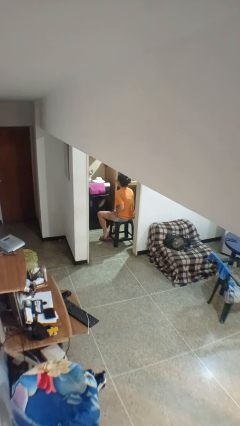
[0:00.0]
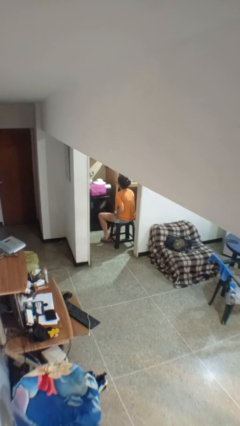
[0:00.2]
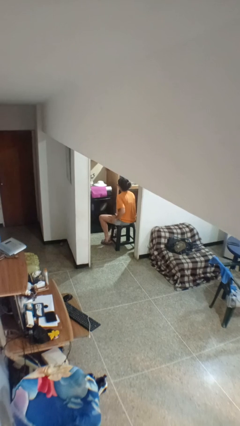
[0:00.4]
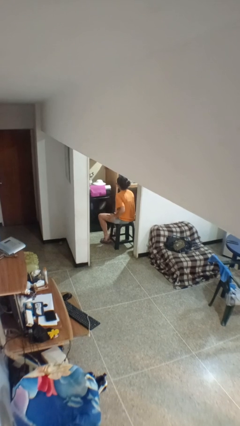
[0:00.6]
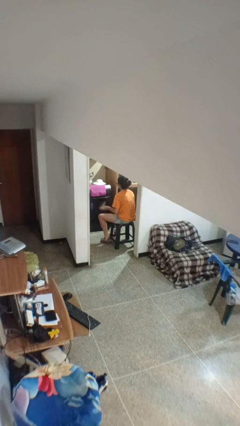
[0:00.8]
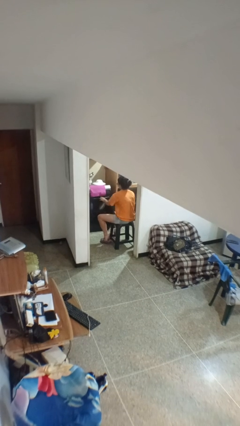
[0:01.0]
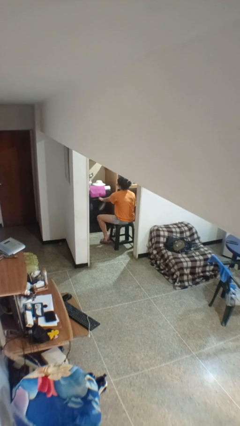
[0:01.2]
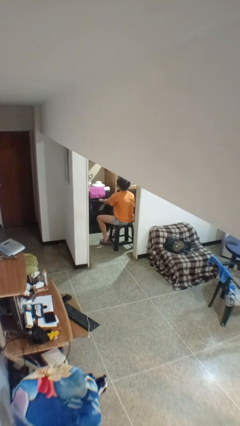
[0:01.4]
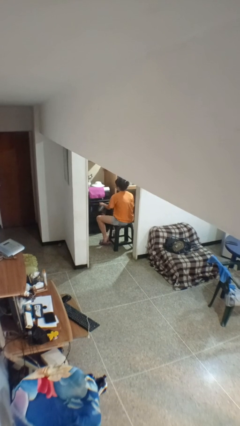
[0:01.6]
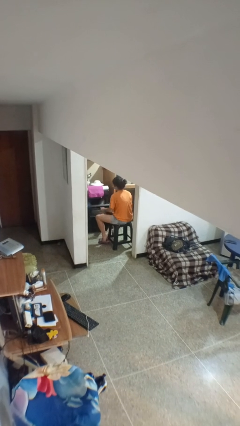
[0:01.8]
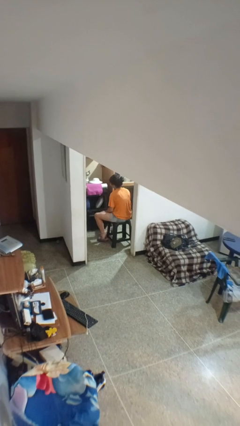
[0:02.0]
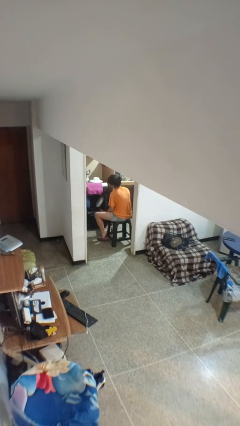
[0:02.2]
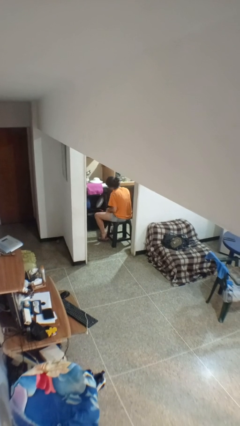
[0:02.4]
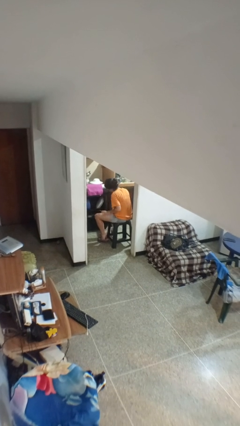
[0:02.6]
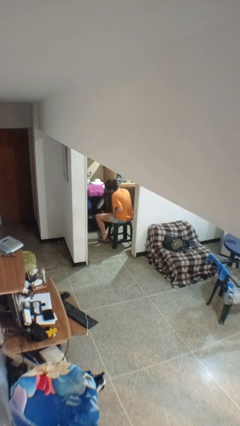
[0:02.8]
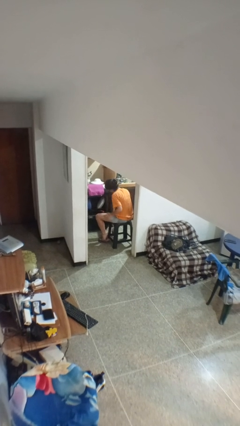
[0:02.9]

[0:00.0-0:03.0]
person opens dishwasher

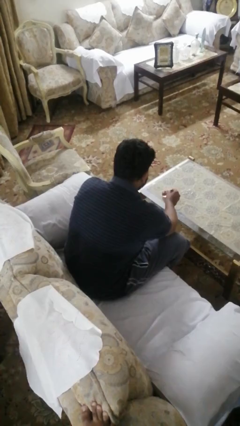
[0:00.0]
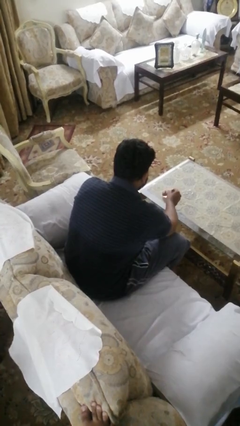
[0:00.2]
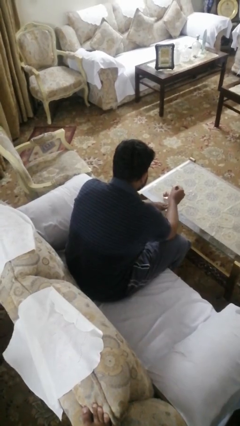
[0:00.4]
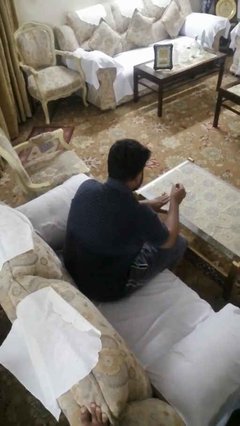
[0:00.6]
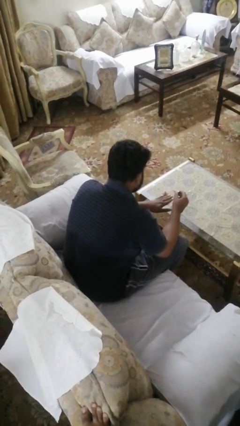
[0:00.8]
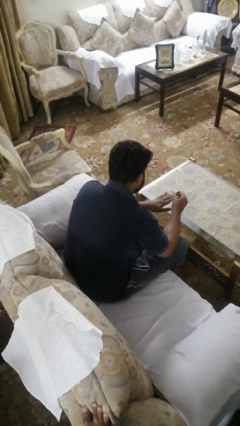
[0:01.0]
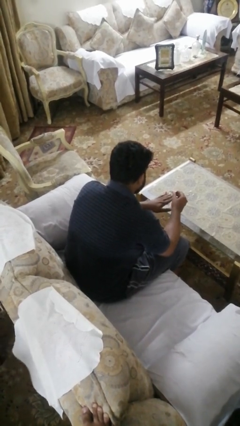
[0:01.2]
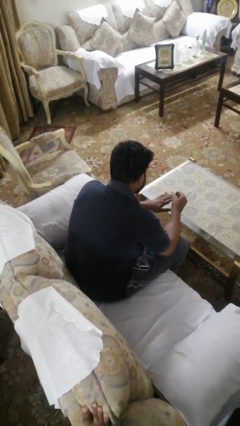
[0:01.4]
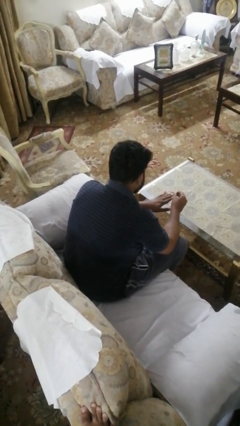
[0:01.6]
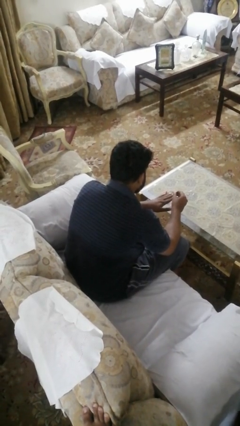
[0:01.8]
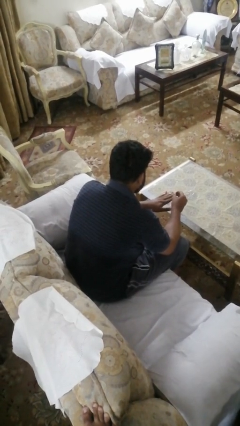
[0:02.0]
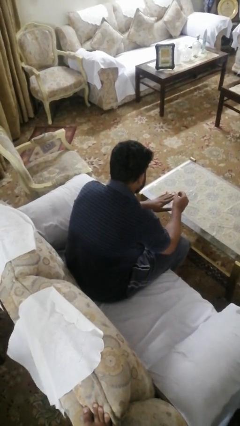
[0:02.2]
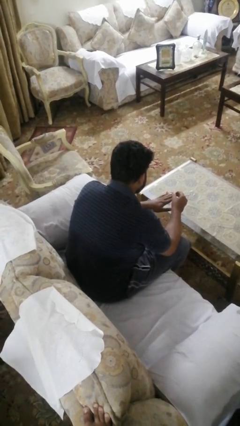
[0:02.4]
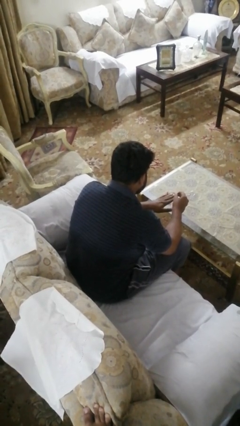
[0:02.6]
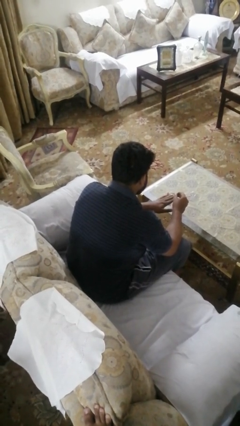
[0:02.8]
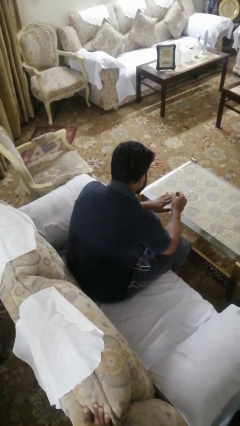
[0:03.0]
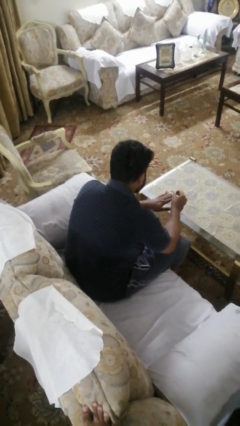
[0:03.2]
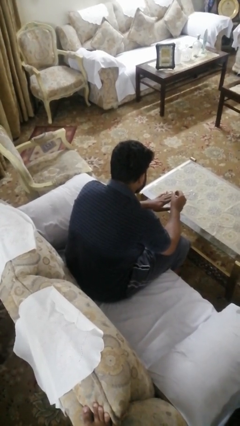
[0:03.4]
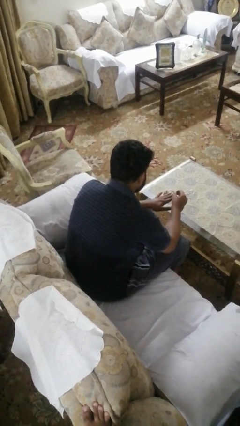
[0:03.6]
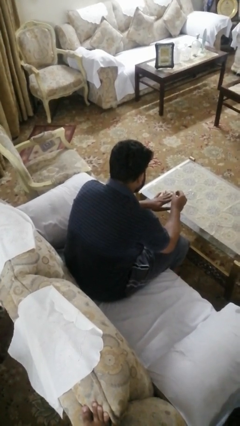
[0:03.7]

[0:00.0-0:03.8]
person paints fingernails

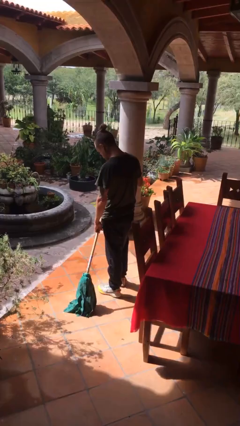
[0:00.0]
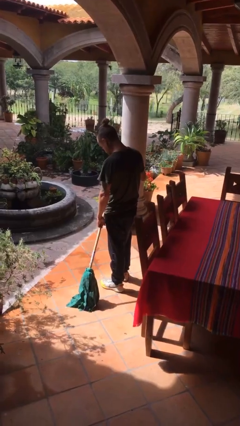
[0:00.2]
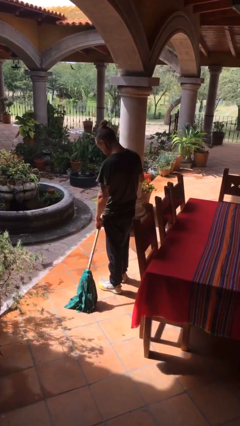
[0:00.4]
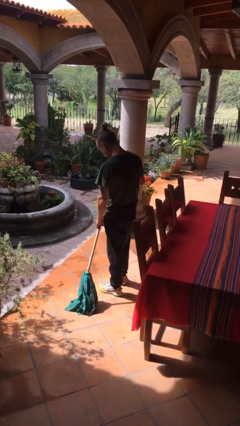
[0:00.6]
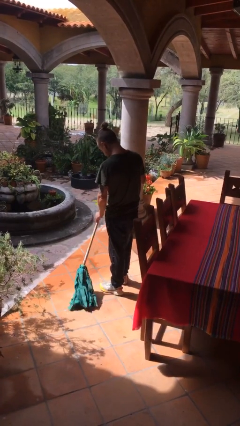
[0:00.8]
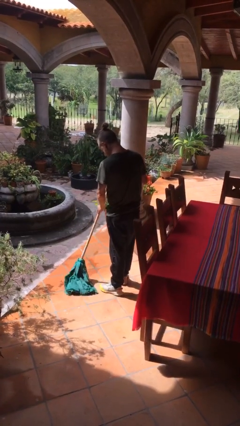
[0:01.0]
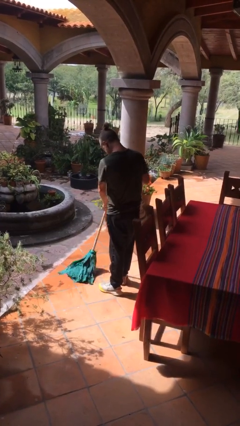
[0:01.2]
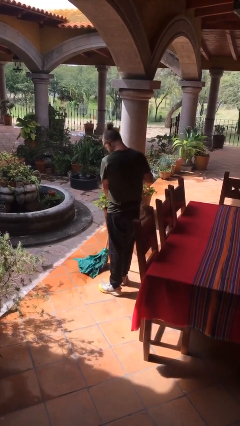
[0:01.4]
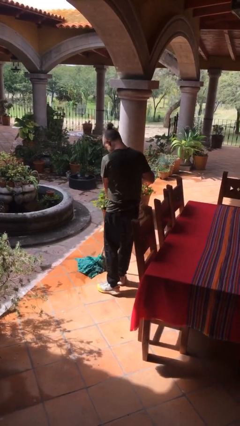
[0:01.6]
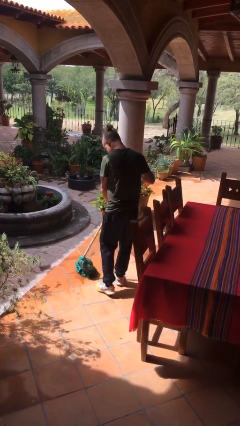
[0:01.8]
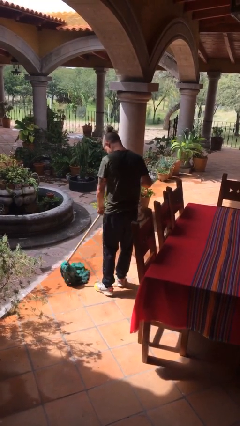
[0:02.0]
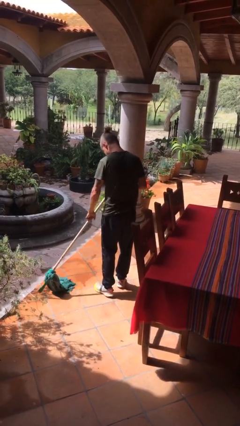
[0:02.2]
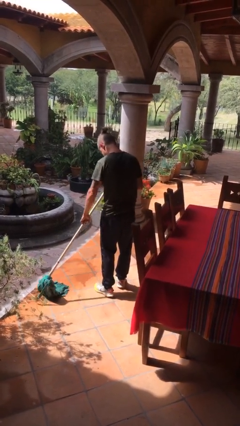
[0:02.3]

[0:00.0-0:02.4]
person mops

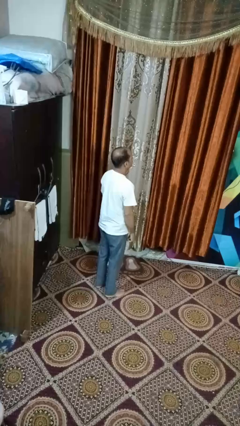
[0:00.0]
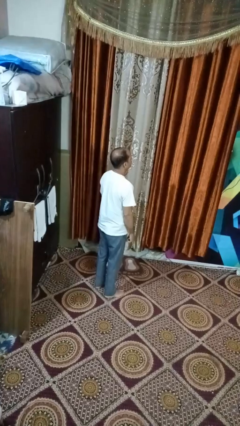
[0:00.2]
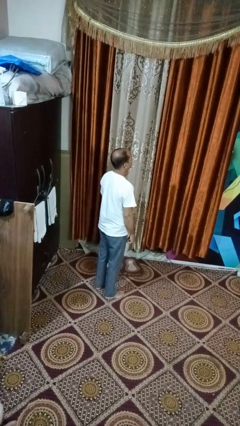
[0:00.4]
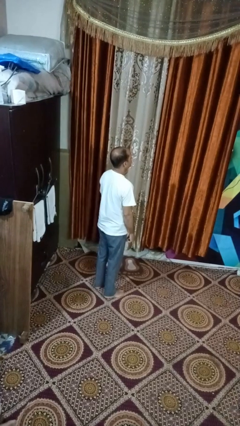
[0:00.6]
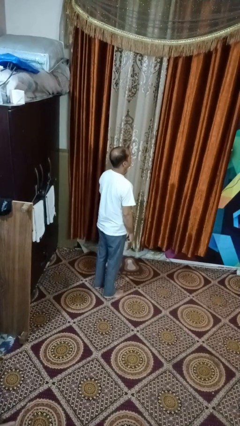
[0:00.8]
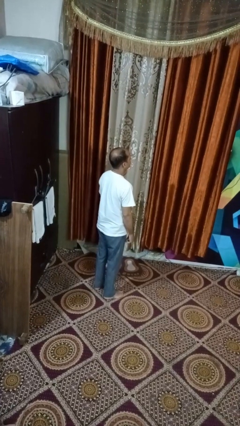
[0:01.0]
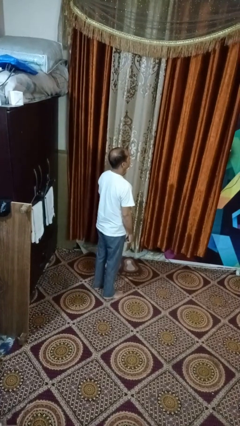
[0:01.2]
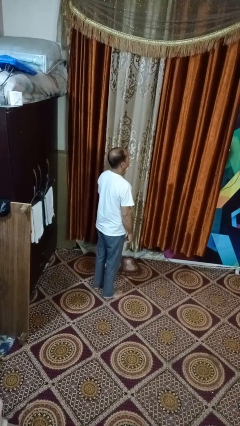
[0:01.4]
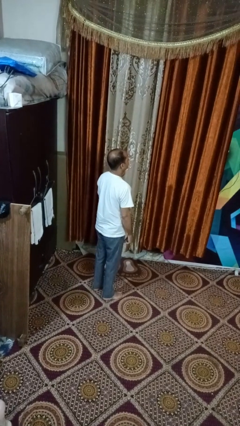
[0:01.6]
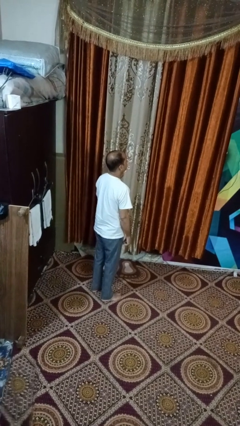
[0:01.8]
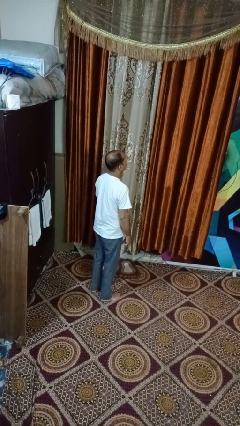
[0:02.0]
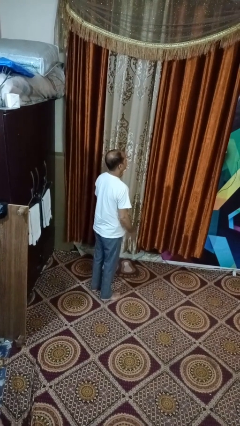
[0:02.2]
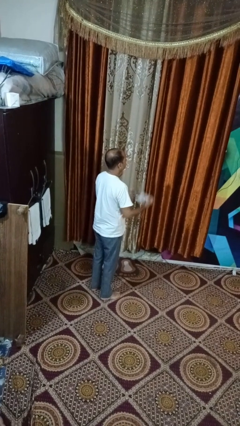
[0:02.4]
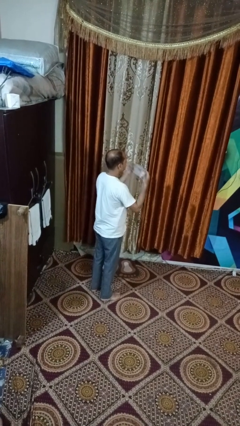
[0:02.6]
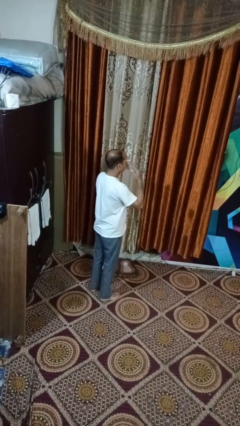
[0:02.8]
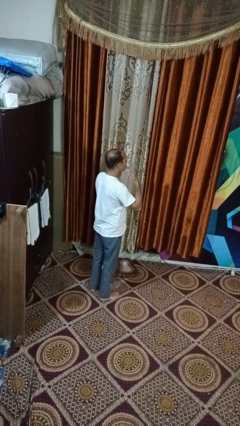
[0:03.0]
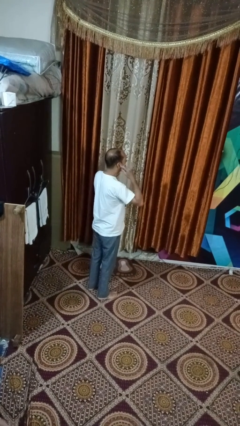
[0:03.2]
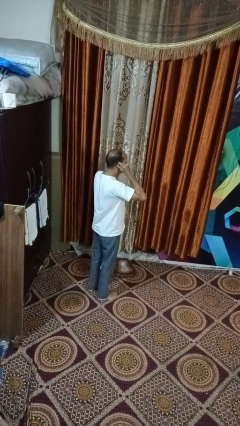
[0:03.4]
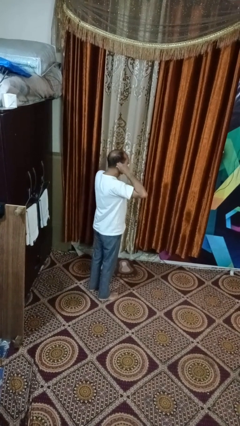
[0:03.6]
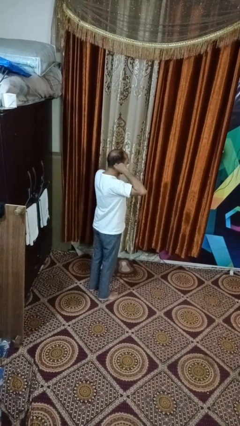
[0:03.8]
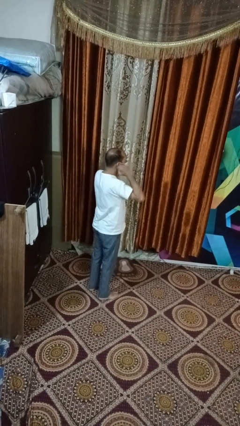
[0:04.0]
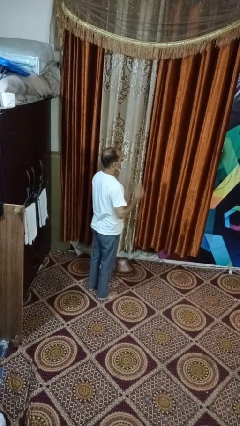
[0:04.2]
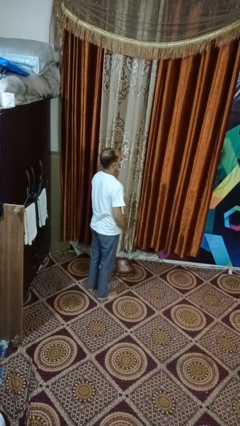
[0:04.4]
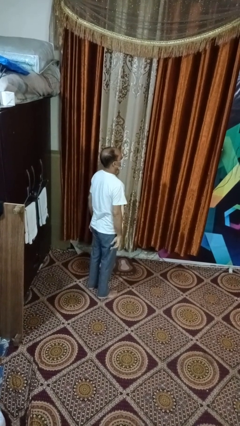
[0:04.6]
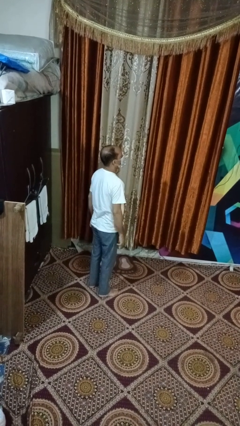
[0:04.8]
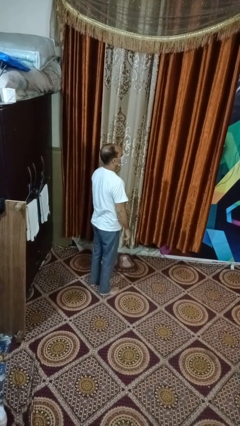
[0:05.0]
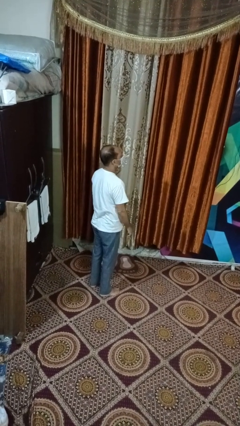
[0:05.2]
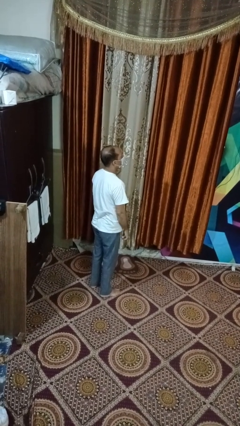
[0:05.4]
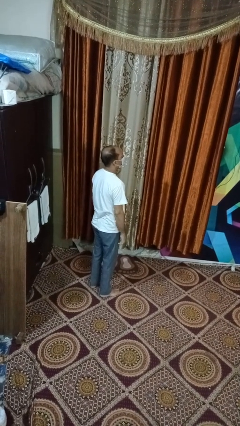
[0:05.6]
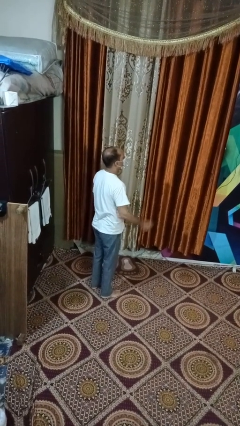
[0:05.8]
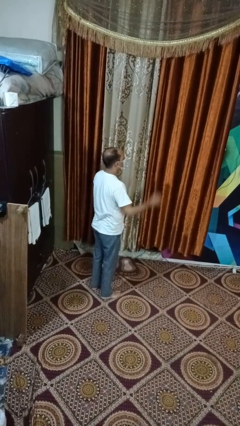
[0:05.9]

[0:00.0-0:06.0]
person puts on facemask

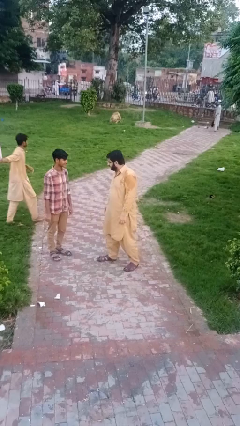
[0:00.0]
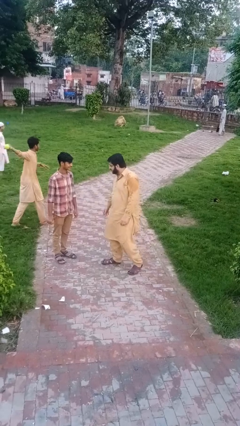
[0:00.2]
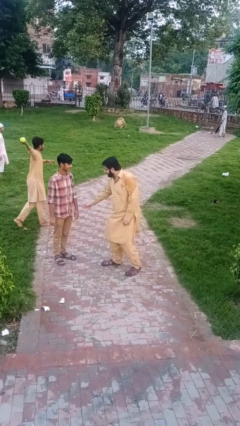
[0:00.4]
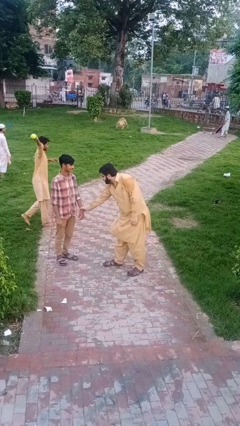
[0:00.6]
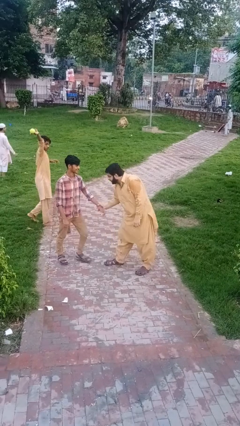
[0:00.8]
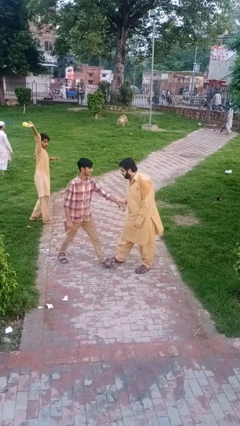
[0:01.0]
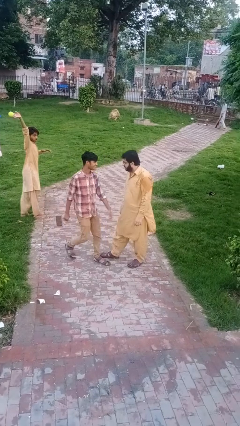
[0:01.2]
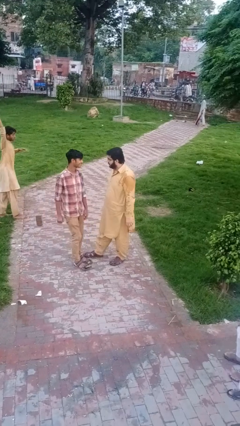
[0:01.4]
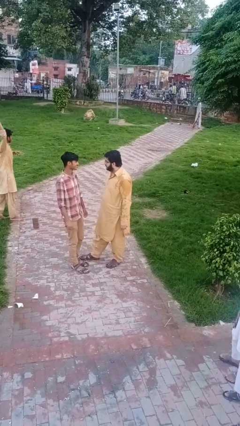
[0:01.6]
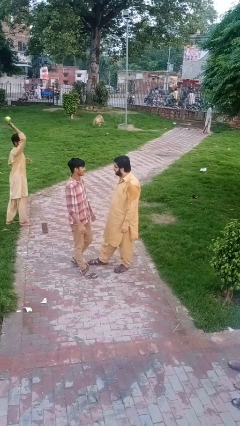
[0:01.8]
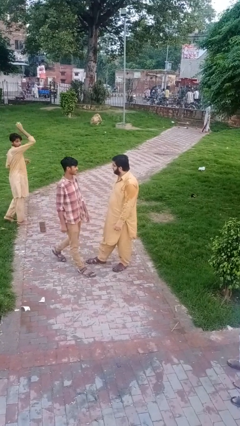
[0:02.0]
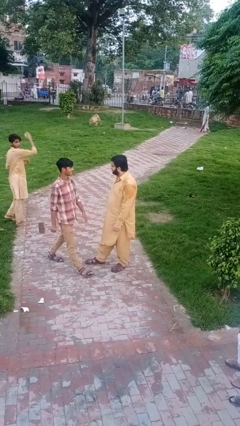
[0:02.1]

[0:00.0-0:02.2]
person grabs person by forearm
